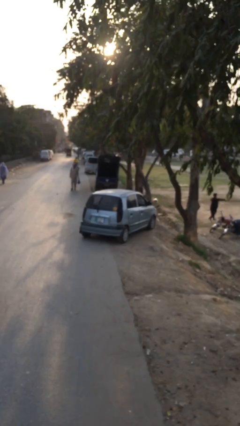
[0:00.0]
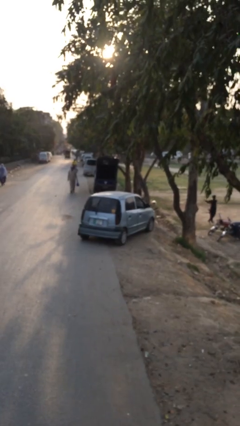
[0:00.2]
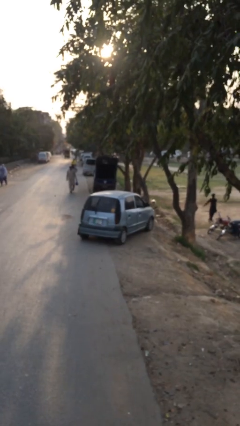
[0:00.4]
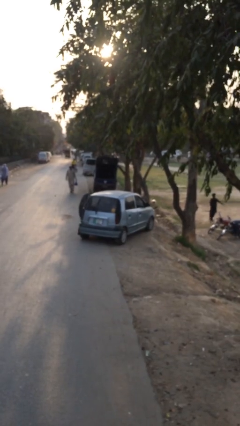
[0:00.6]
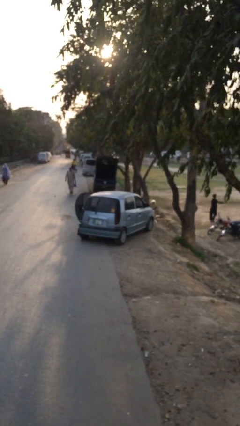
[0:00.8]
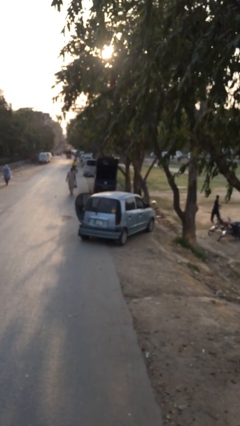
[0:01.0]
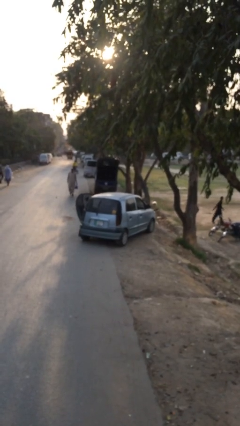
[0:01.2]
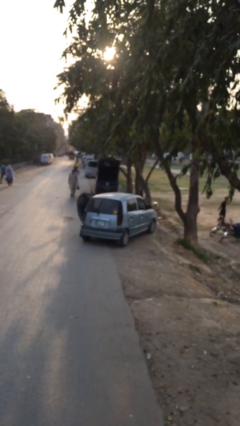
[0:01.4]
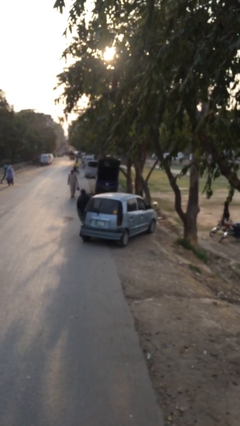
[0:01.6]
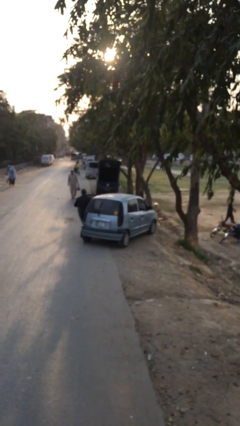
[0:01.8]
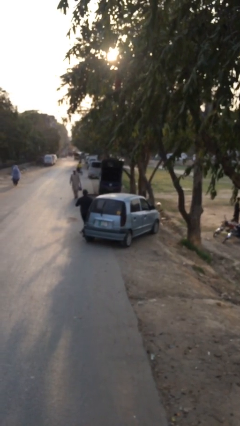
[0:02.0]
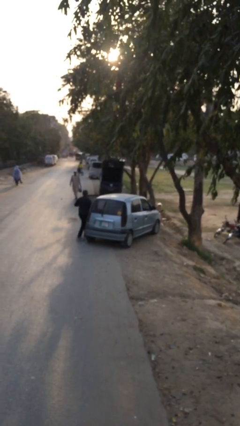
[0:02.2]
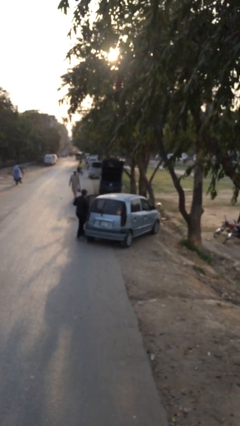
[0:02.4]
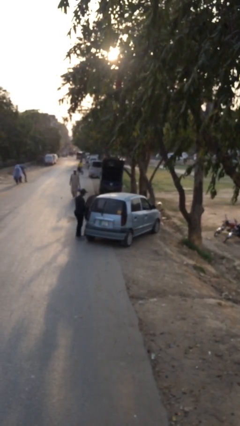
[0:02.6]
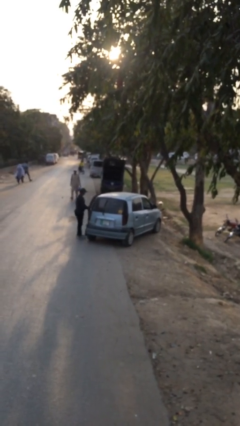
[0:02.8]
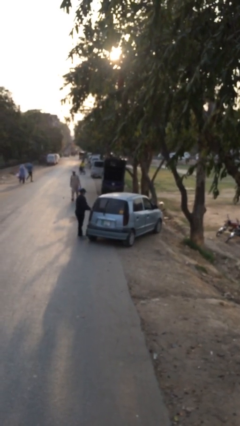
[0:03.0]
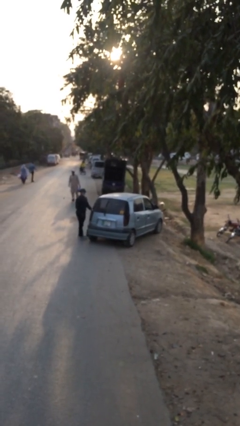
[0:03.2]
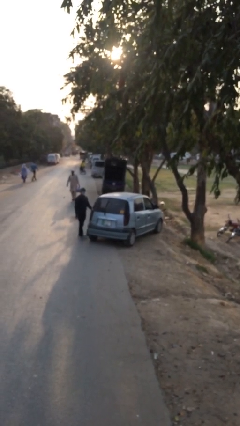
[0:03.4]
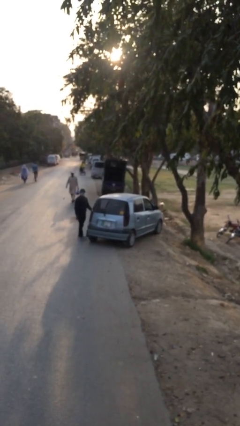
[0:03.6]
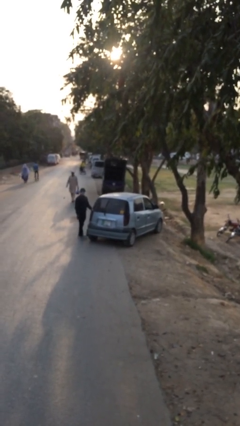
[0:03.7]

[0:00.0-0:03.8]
car drops off person

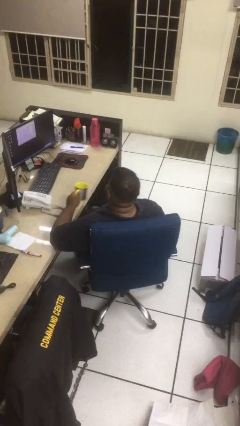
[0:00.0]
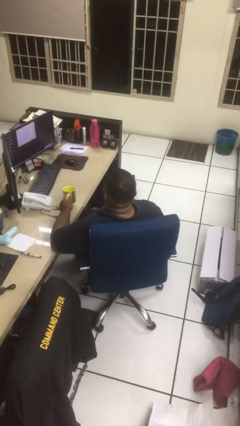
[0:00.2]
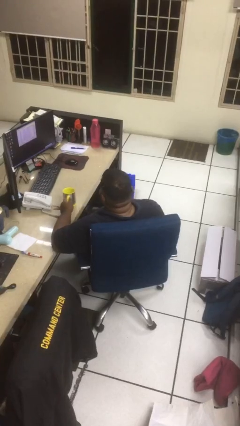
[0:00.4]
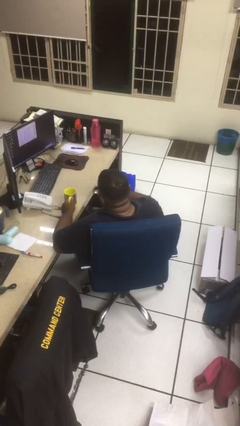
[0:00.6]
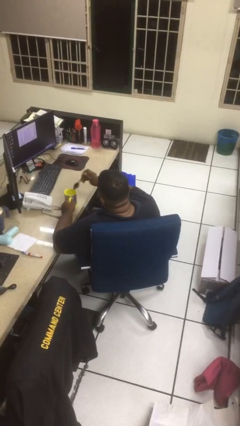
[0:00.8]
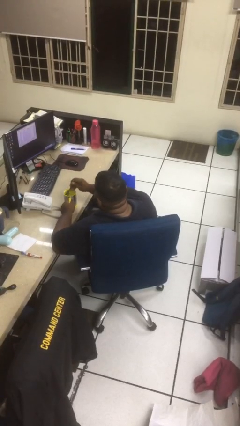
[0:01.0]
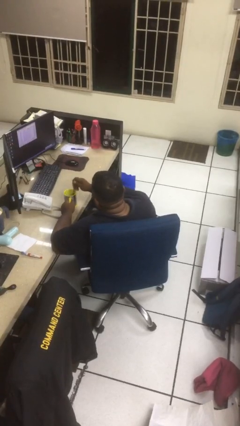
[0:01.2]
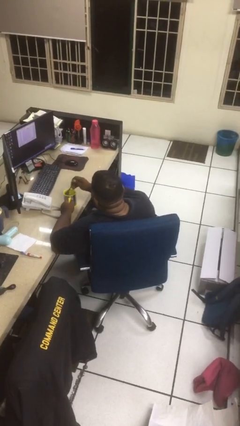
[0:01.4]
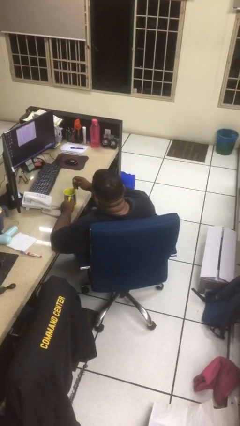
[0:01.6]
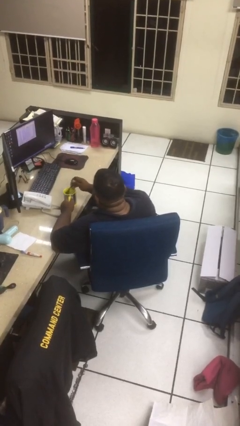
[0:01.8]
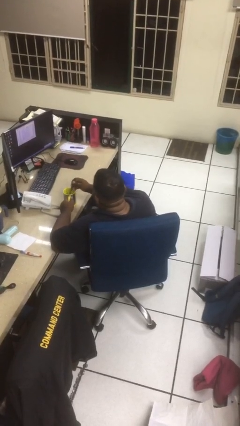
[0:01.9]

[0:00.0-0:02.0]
person stirs mug

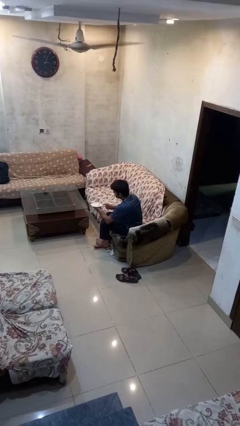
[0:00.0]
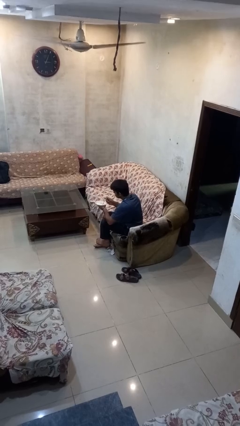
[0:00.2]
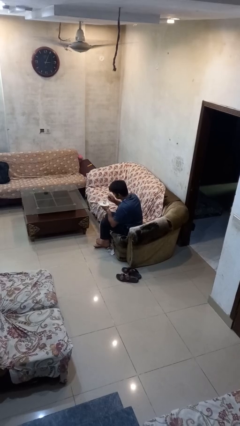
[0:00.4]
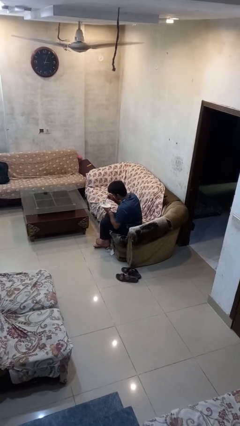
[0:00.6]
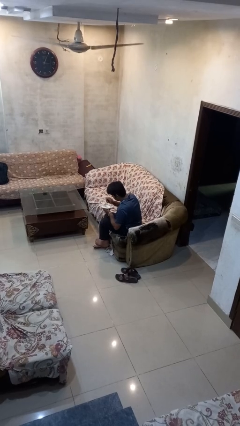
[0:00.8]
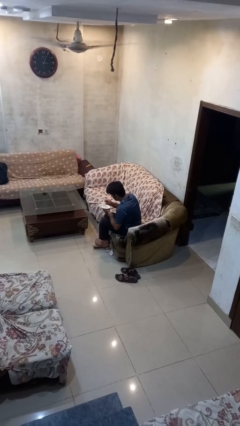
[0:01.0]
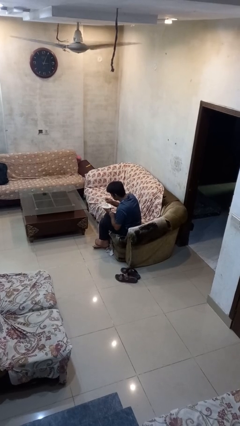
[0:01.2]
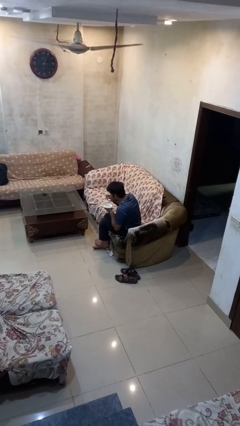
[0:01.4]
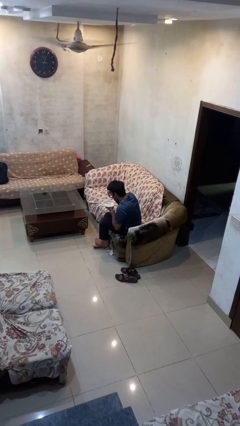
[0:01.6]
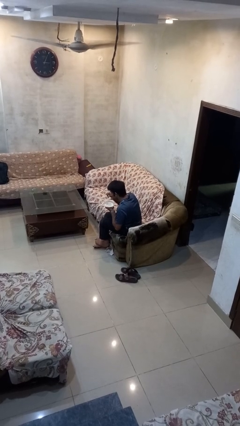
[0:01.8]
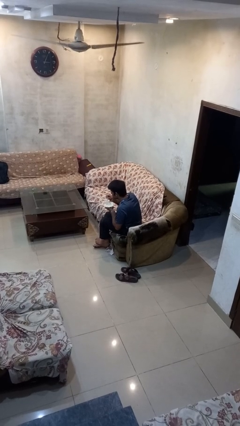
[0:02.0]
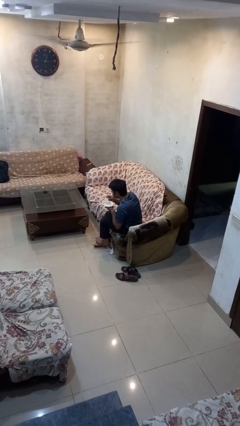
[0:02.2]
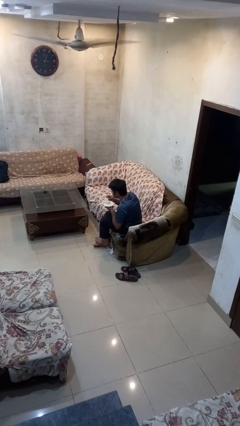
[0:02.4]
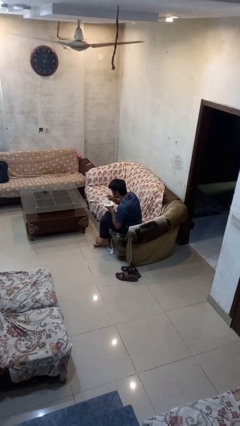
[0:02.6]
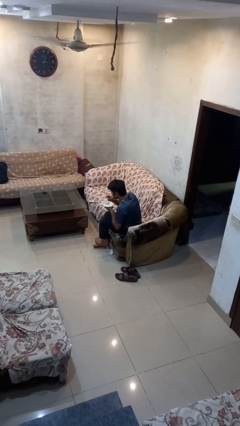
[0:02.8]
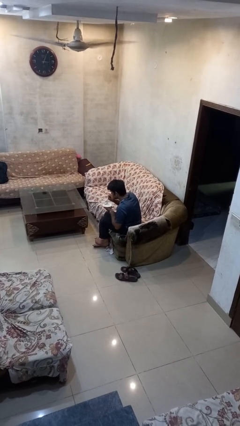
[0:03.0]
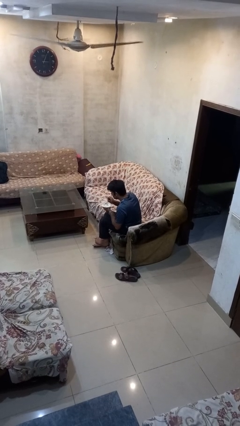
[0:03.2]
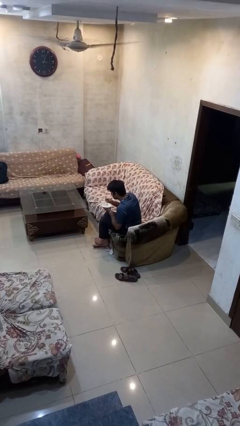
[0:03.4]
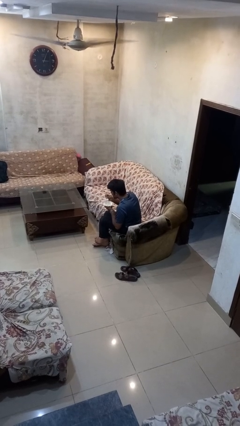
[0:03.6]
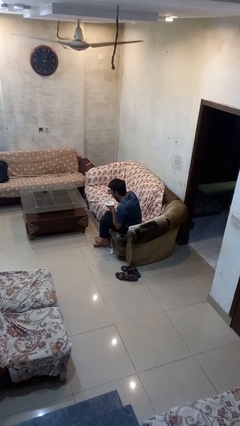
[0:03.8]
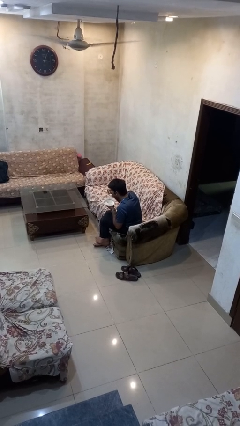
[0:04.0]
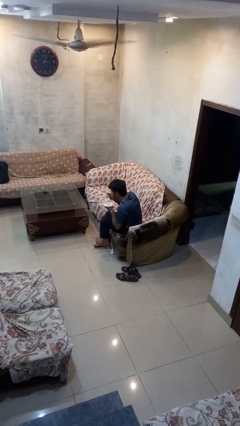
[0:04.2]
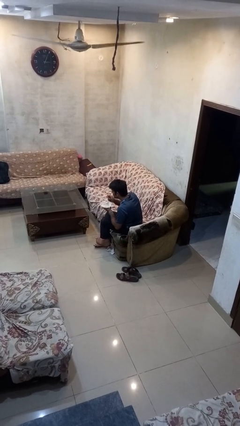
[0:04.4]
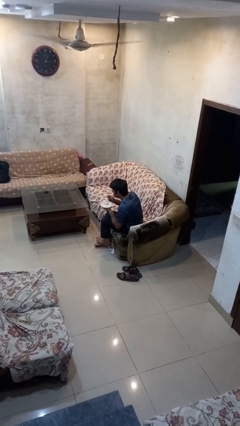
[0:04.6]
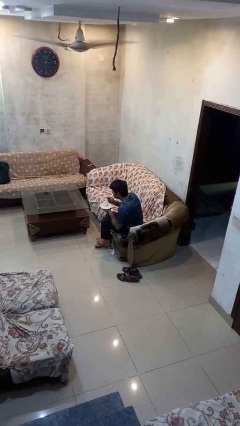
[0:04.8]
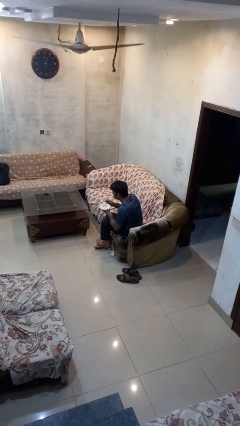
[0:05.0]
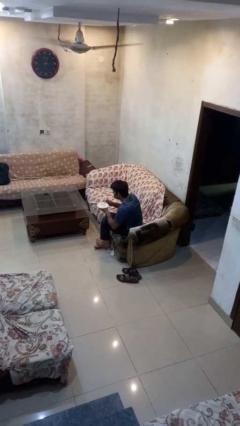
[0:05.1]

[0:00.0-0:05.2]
person eats with utensil

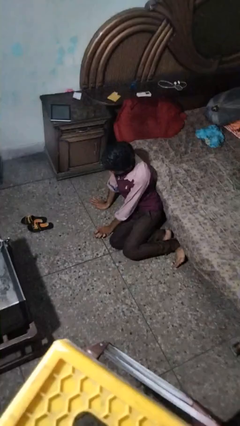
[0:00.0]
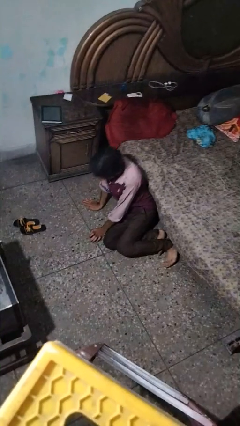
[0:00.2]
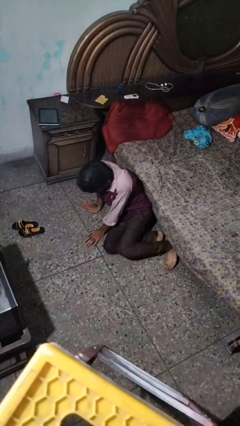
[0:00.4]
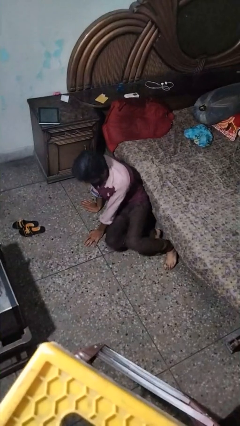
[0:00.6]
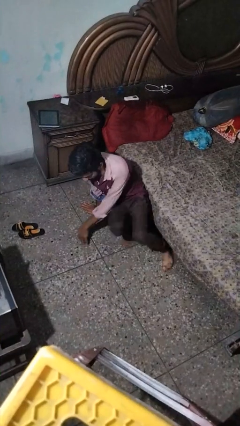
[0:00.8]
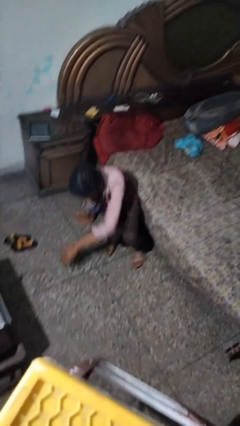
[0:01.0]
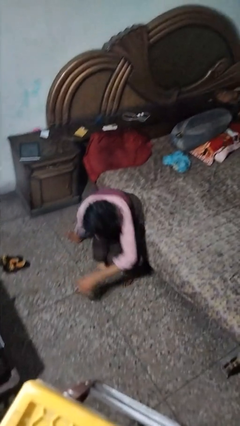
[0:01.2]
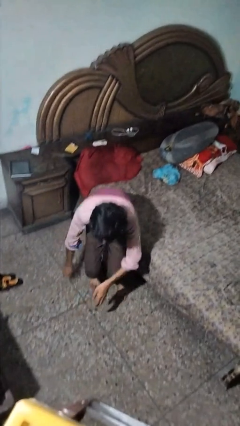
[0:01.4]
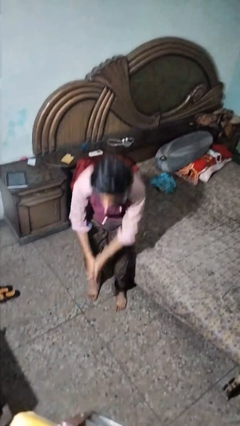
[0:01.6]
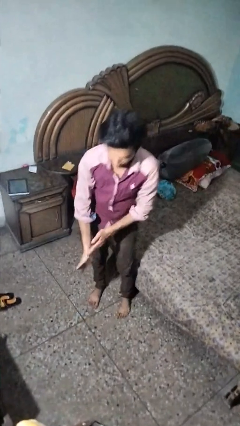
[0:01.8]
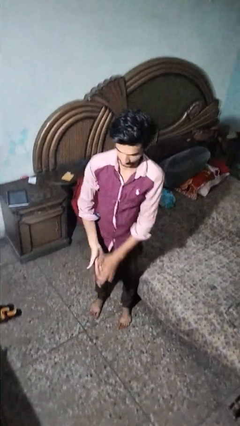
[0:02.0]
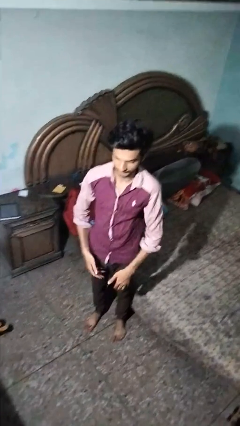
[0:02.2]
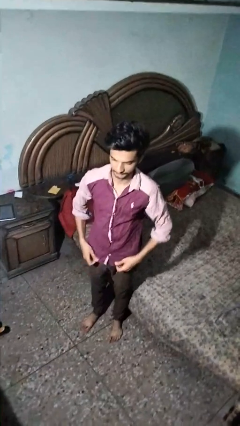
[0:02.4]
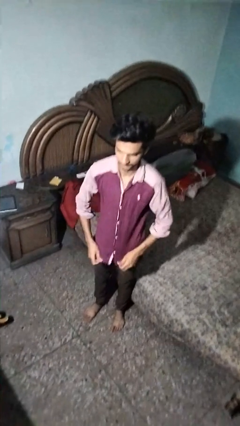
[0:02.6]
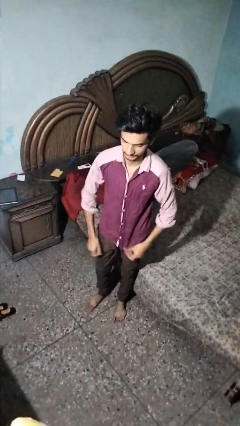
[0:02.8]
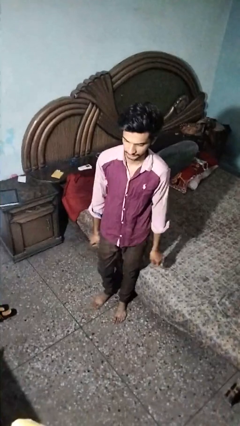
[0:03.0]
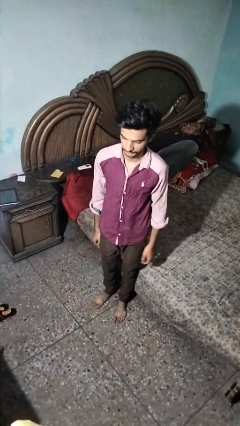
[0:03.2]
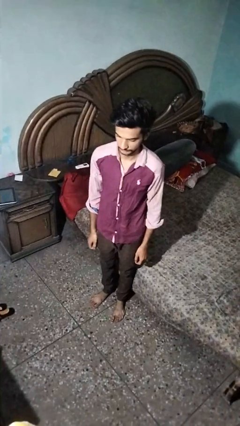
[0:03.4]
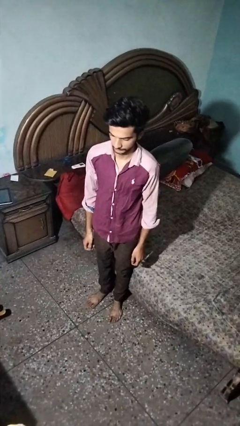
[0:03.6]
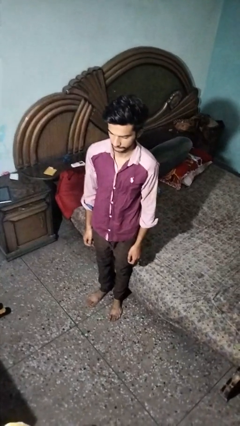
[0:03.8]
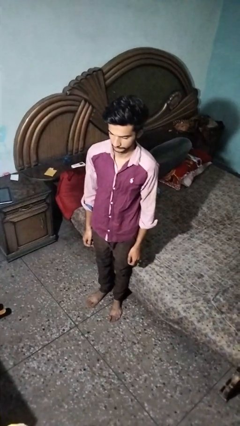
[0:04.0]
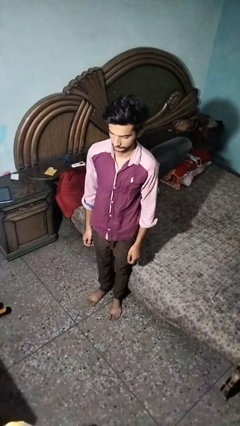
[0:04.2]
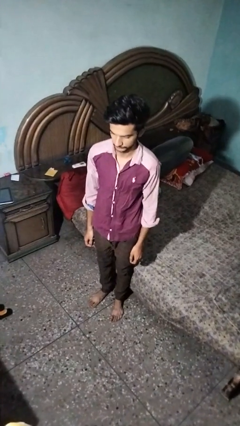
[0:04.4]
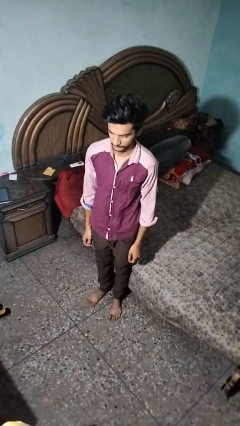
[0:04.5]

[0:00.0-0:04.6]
person stands up from floor

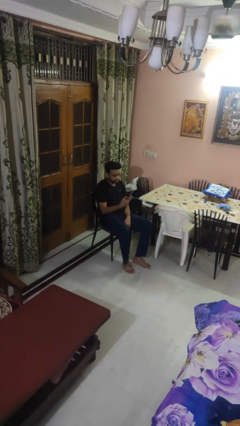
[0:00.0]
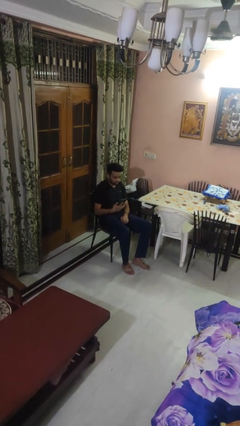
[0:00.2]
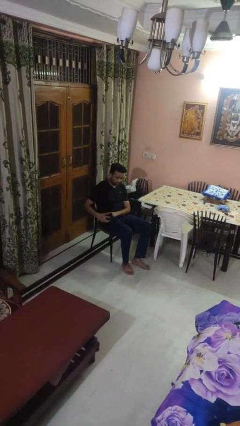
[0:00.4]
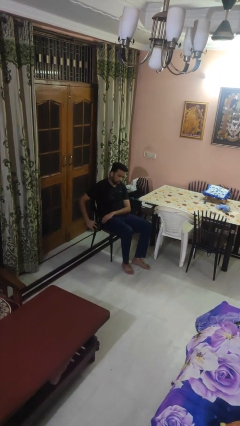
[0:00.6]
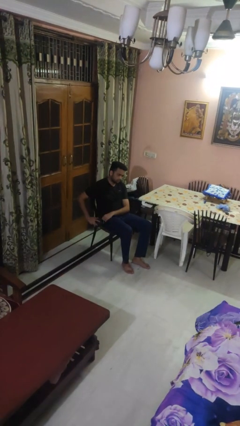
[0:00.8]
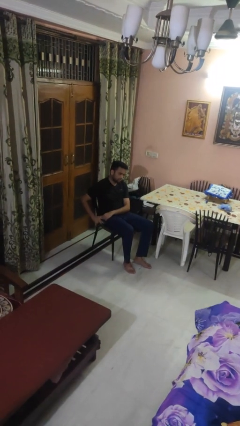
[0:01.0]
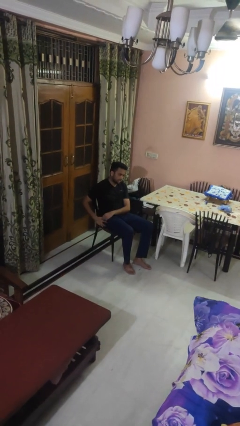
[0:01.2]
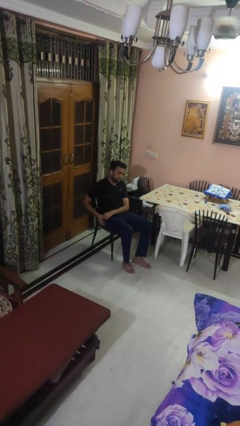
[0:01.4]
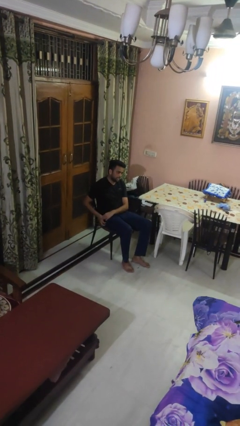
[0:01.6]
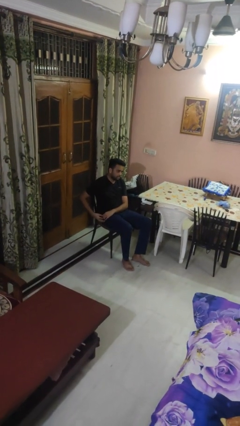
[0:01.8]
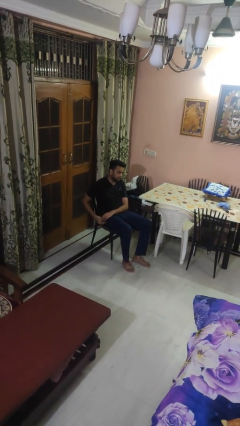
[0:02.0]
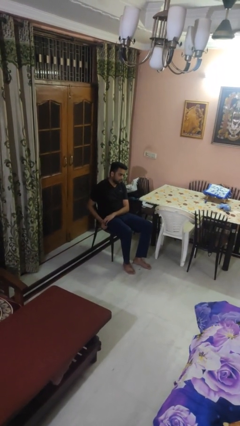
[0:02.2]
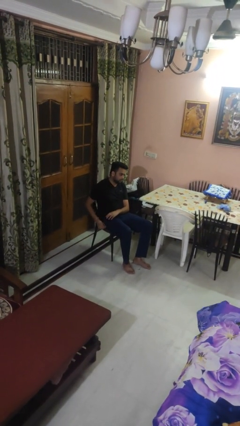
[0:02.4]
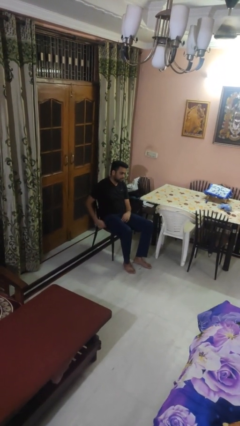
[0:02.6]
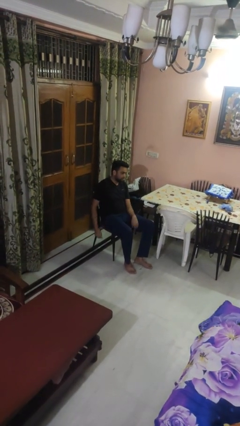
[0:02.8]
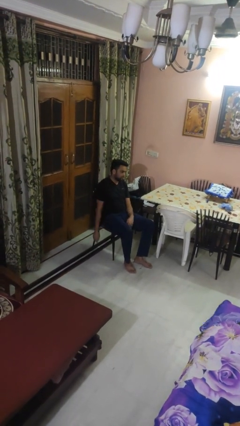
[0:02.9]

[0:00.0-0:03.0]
person puts phone into pocket
